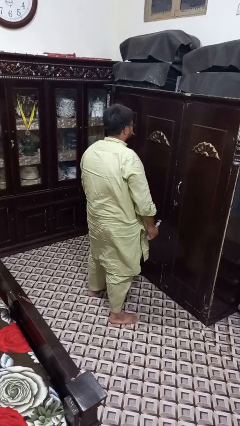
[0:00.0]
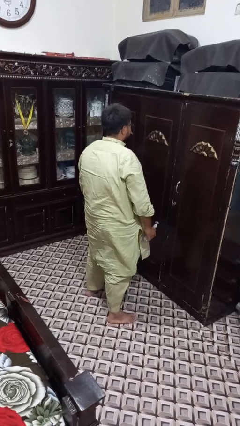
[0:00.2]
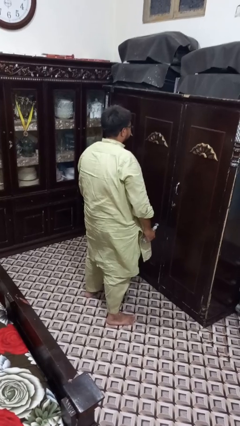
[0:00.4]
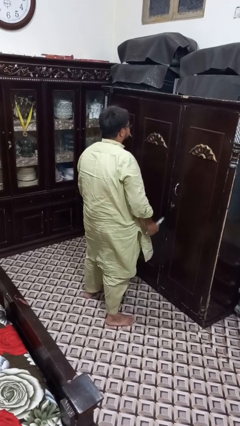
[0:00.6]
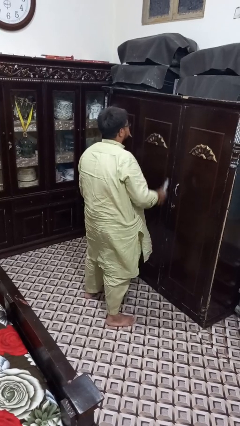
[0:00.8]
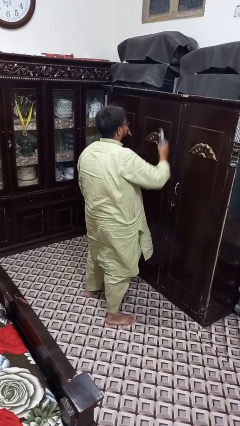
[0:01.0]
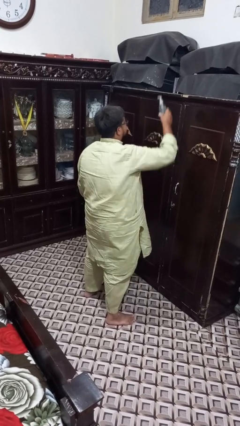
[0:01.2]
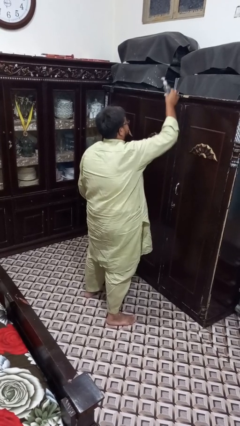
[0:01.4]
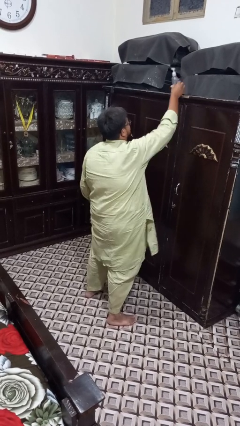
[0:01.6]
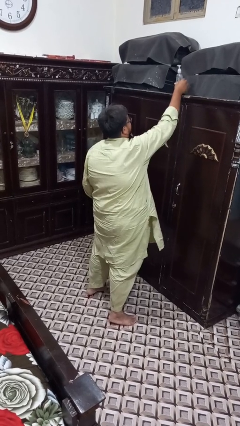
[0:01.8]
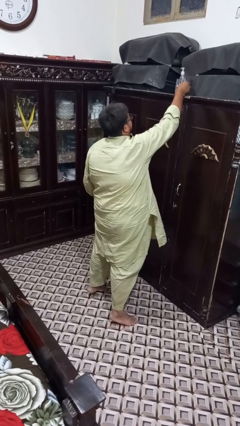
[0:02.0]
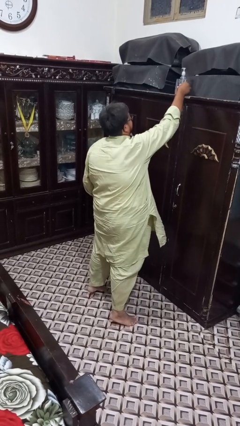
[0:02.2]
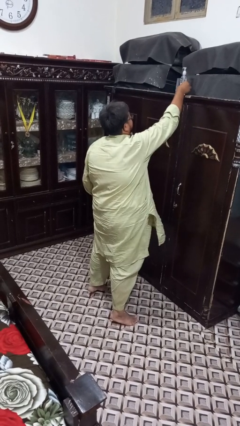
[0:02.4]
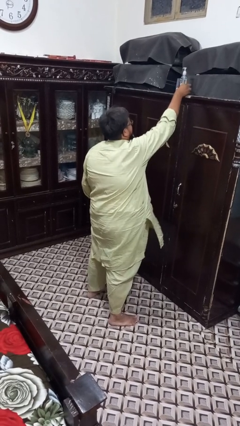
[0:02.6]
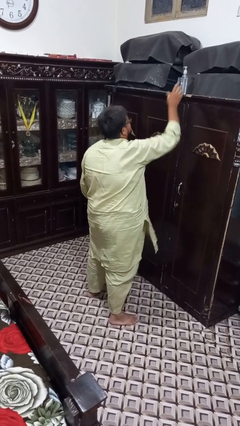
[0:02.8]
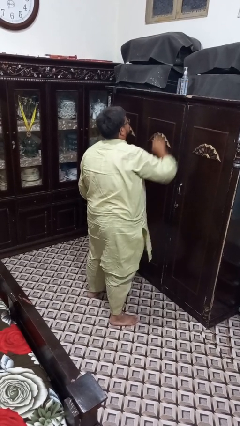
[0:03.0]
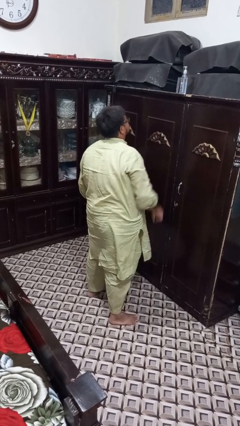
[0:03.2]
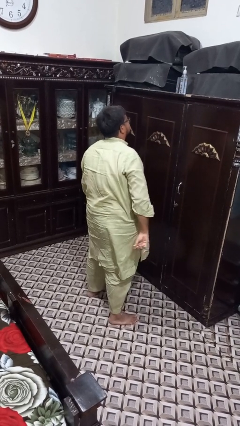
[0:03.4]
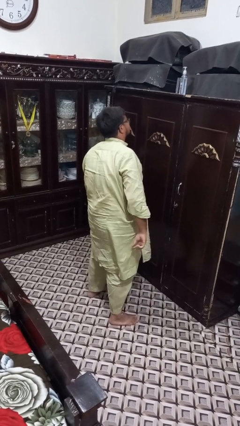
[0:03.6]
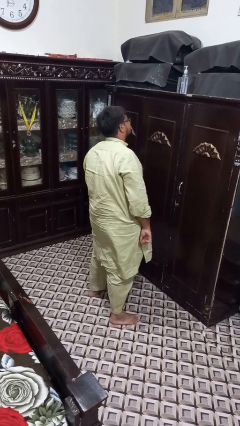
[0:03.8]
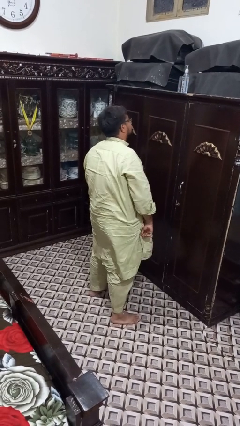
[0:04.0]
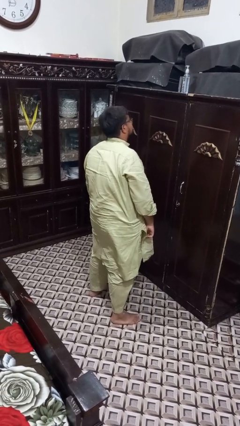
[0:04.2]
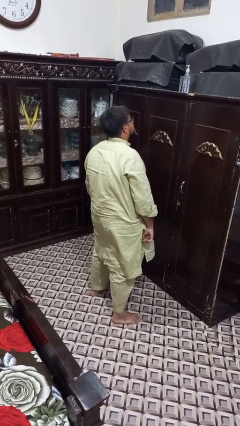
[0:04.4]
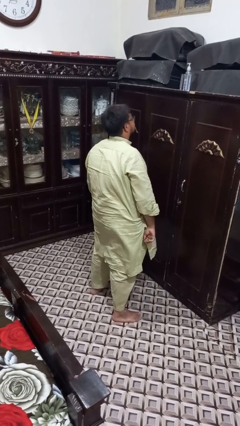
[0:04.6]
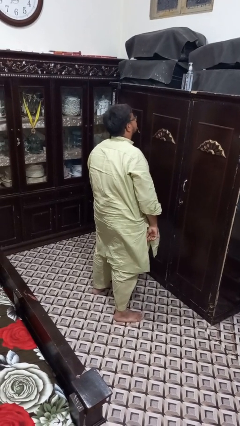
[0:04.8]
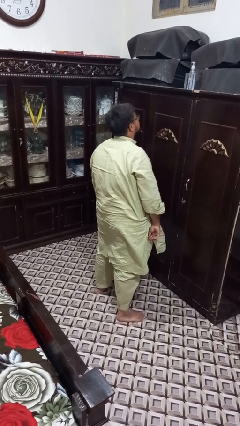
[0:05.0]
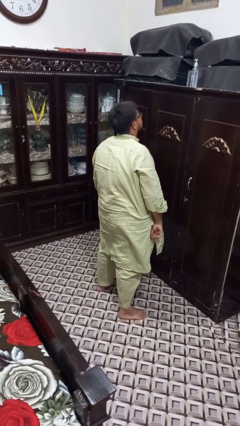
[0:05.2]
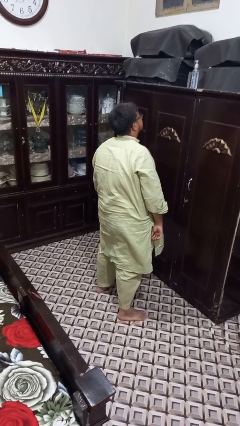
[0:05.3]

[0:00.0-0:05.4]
person puts down object into cabinet

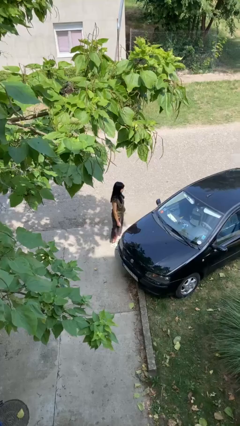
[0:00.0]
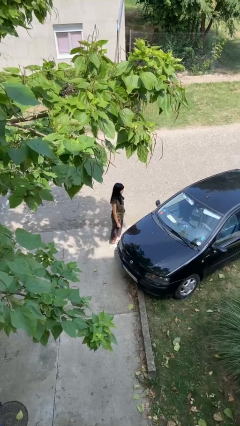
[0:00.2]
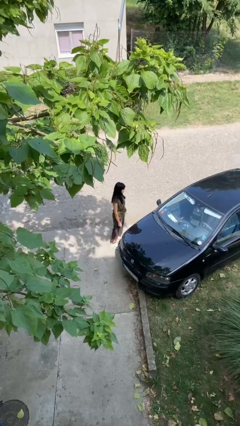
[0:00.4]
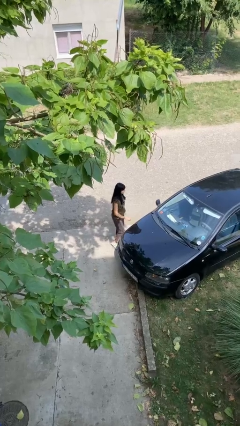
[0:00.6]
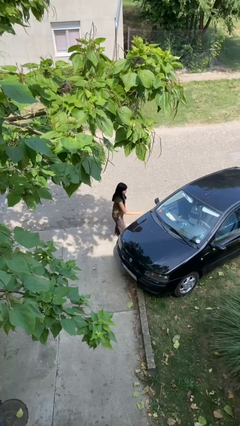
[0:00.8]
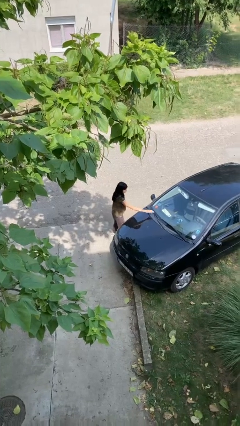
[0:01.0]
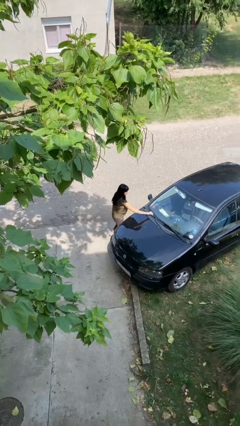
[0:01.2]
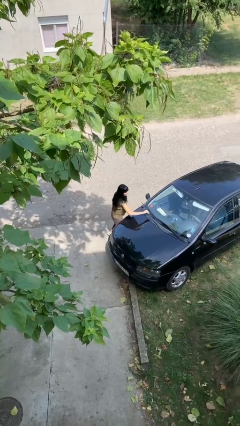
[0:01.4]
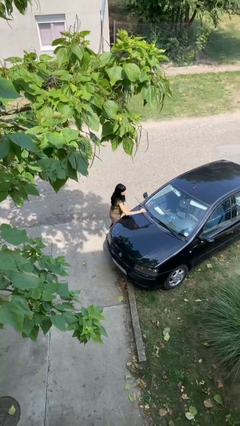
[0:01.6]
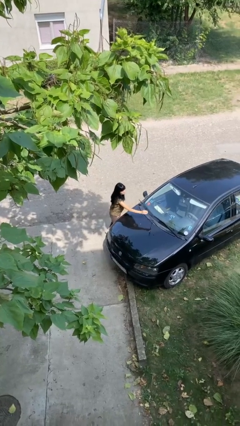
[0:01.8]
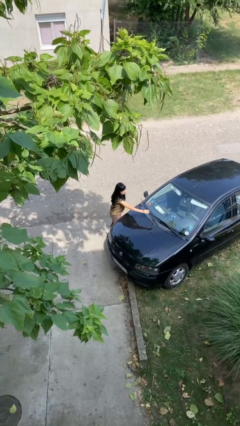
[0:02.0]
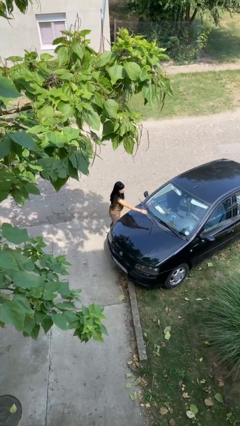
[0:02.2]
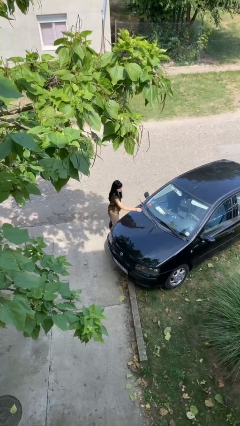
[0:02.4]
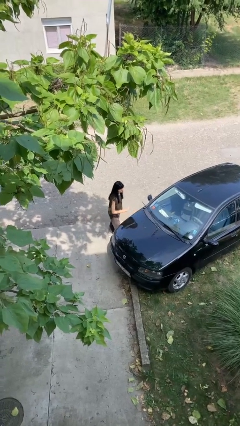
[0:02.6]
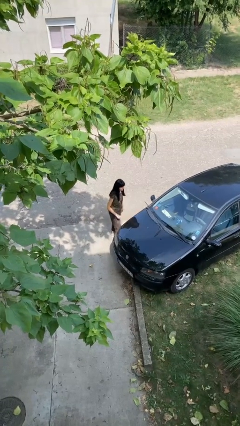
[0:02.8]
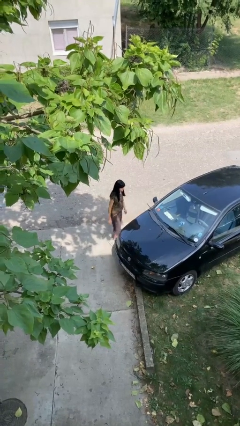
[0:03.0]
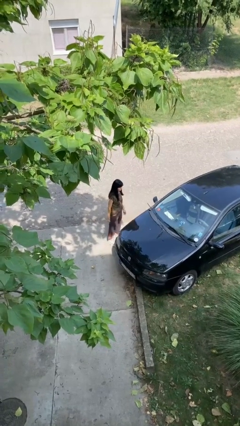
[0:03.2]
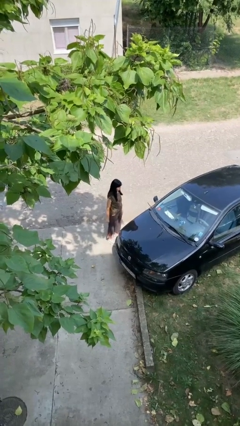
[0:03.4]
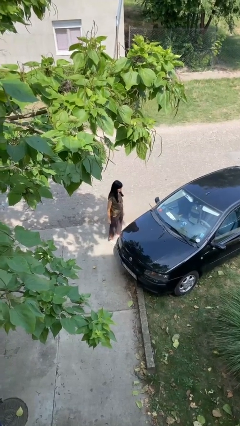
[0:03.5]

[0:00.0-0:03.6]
person flips up car wipers

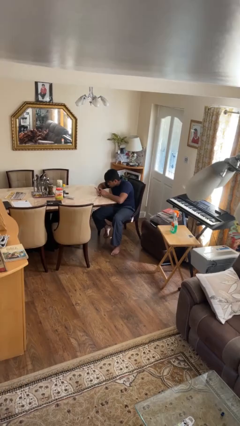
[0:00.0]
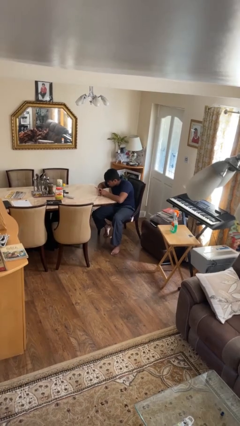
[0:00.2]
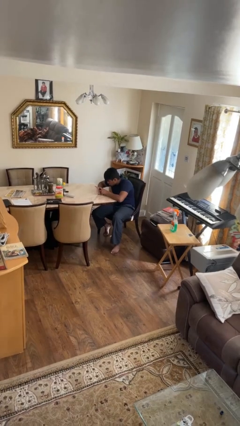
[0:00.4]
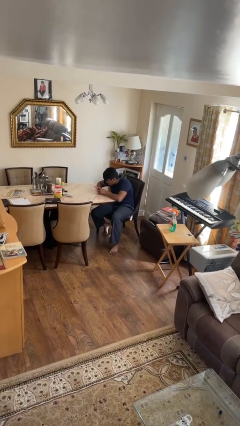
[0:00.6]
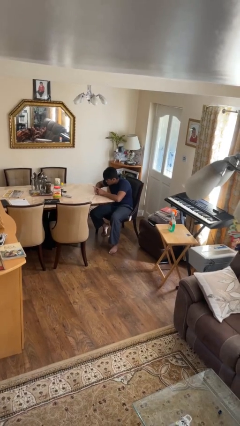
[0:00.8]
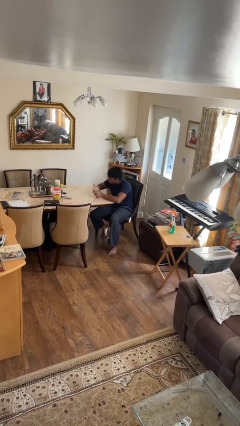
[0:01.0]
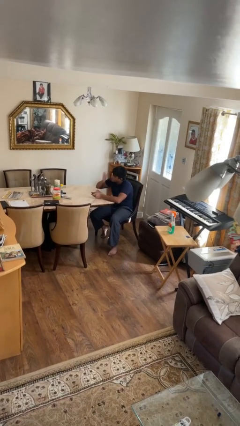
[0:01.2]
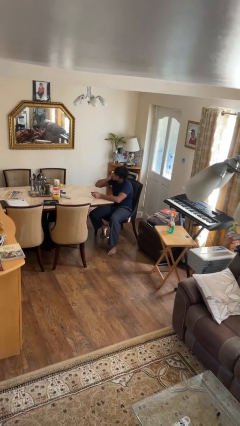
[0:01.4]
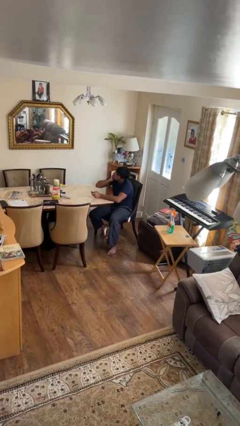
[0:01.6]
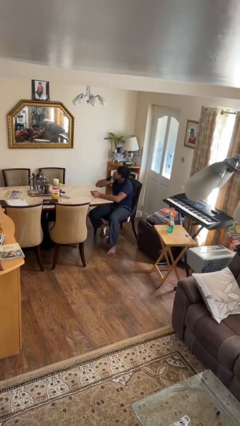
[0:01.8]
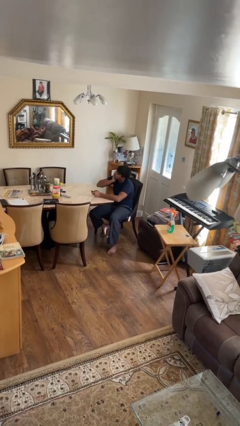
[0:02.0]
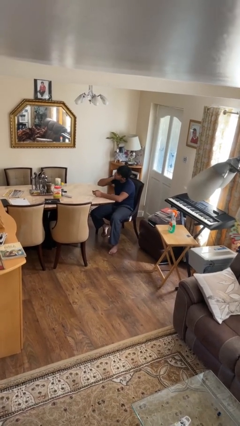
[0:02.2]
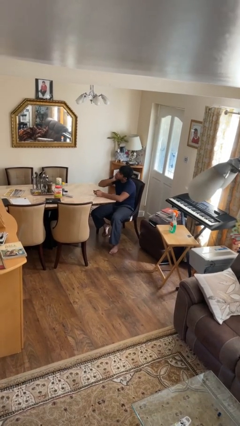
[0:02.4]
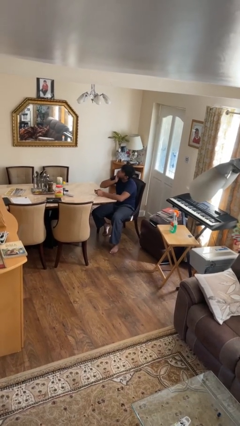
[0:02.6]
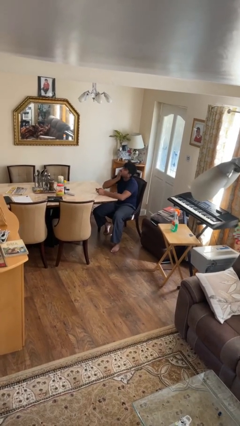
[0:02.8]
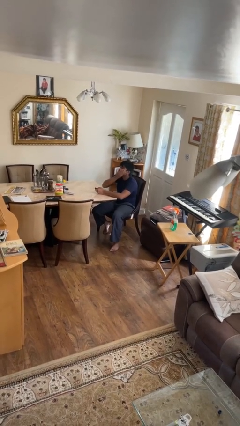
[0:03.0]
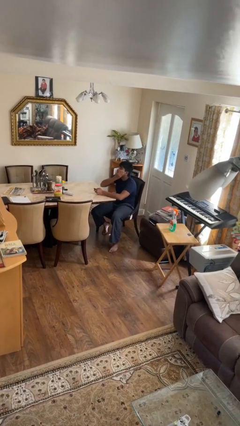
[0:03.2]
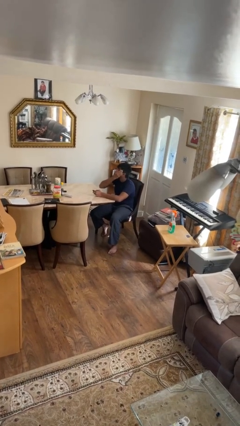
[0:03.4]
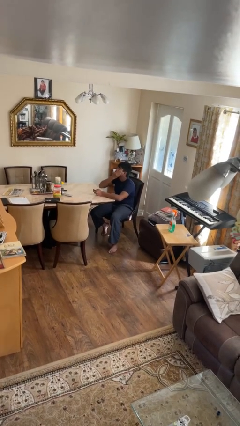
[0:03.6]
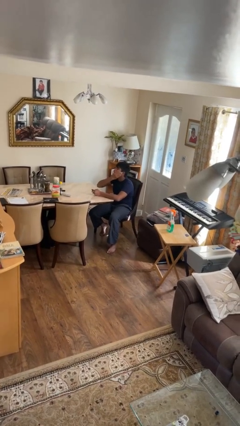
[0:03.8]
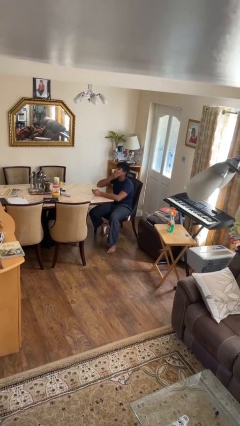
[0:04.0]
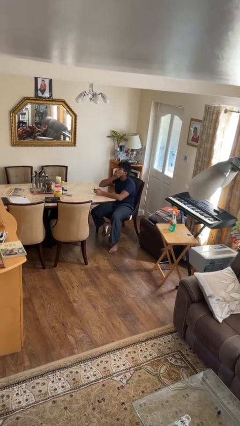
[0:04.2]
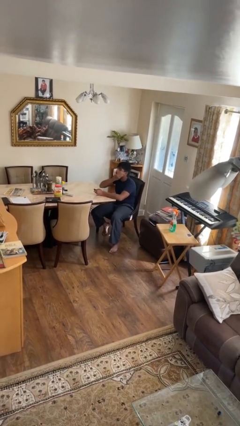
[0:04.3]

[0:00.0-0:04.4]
person applies foundation makeup

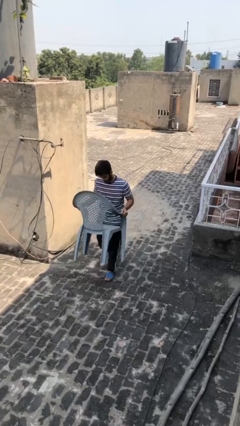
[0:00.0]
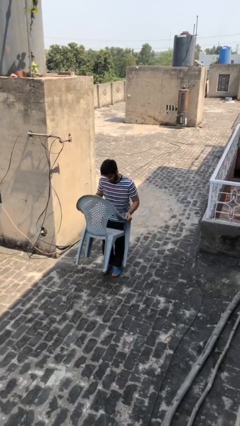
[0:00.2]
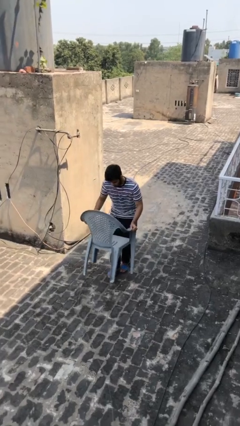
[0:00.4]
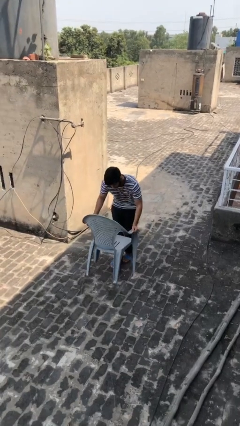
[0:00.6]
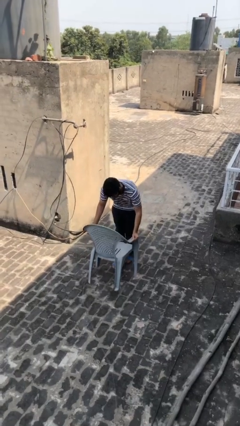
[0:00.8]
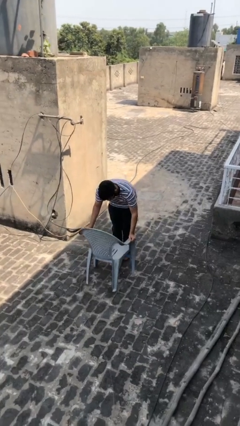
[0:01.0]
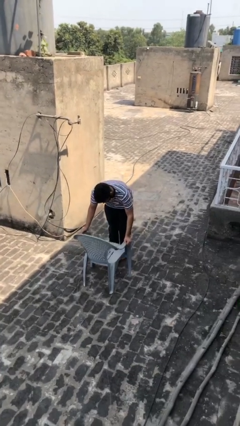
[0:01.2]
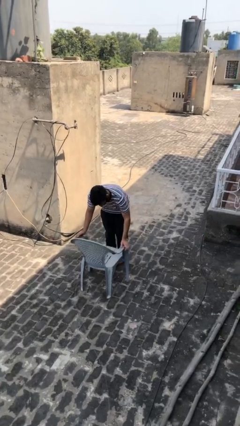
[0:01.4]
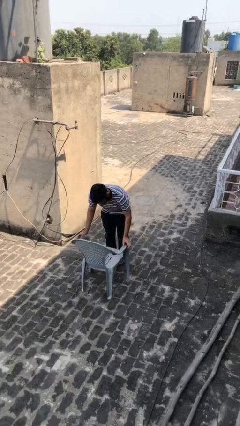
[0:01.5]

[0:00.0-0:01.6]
person puts down object on floor

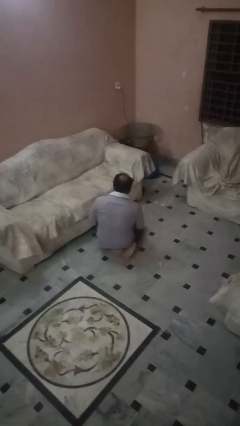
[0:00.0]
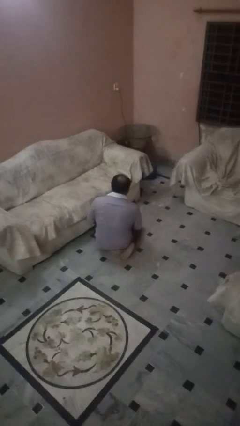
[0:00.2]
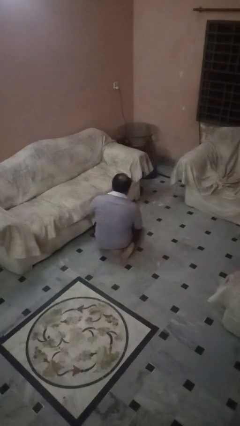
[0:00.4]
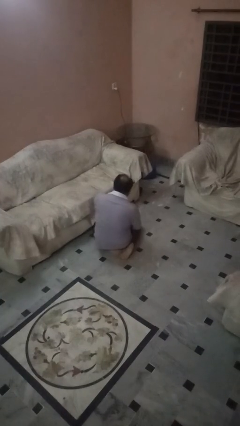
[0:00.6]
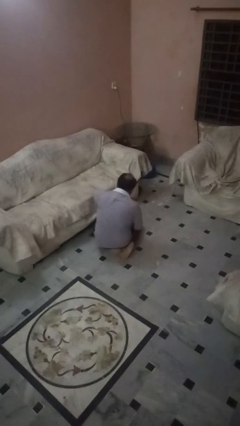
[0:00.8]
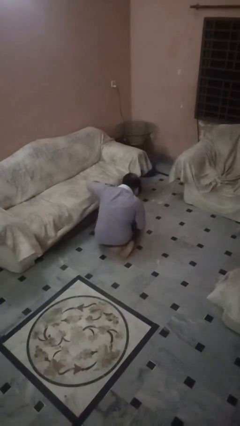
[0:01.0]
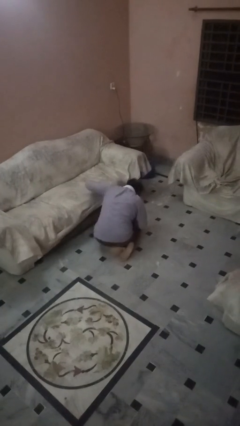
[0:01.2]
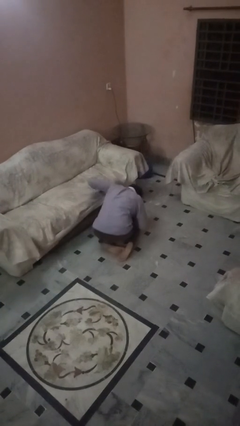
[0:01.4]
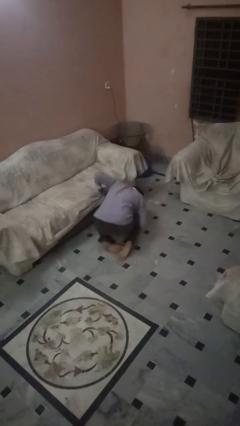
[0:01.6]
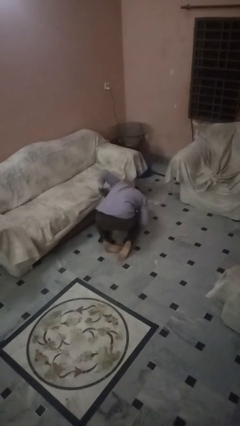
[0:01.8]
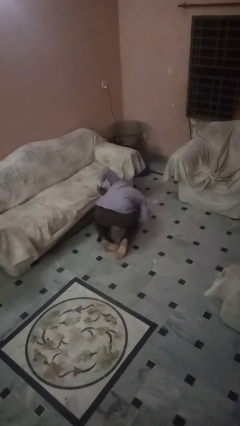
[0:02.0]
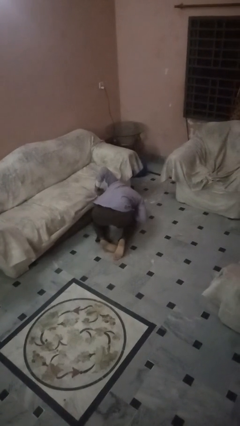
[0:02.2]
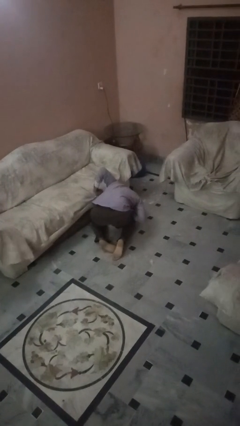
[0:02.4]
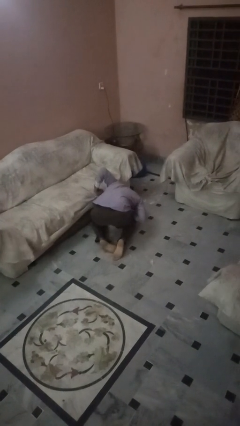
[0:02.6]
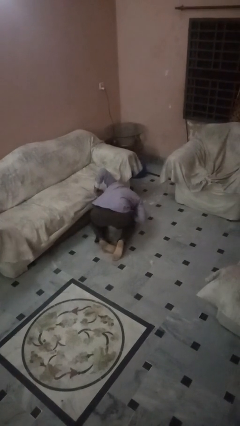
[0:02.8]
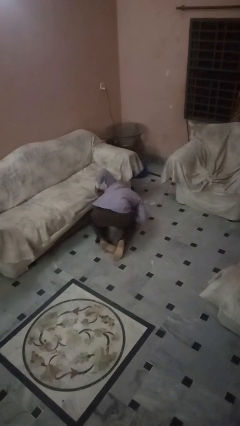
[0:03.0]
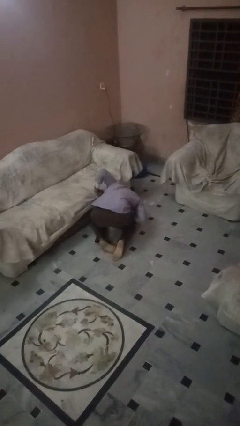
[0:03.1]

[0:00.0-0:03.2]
person searches under couch
